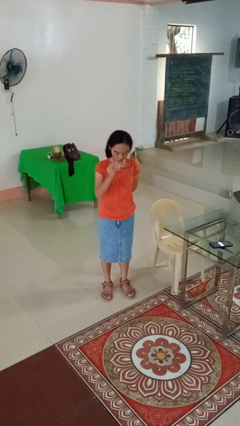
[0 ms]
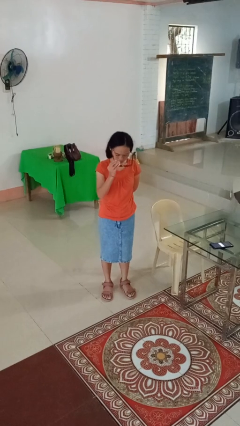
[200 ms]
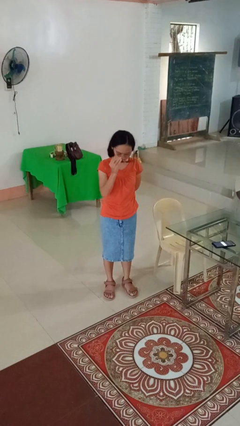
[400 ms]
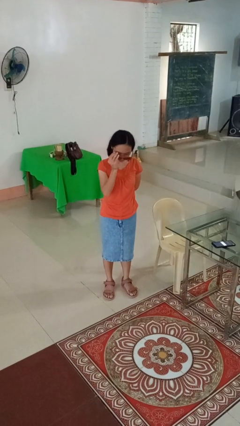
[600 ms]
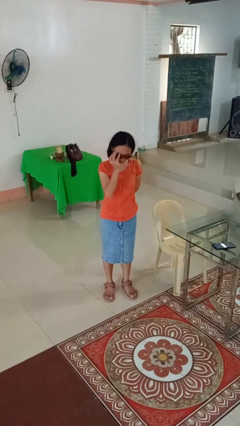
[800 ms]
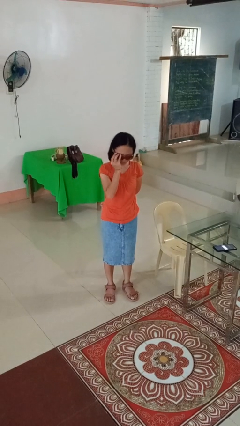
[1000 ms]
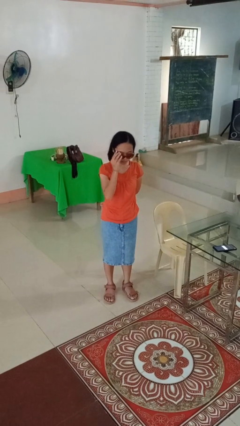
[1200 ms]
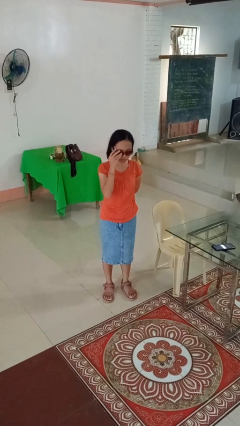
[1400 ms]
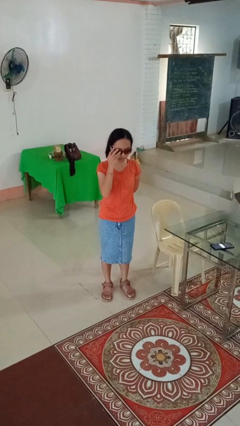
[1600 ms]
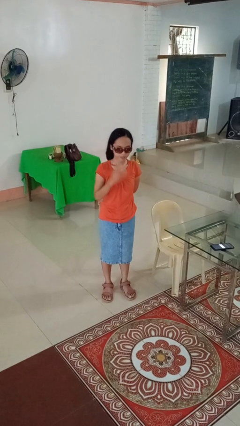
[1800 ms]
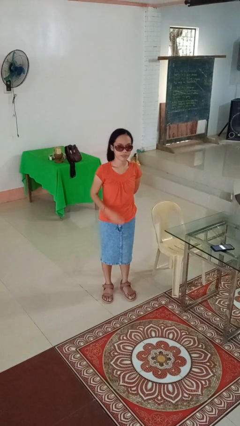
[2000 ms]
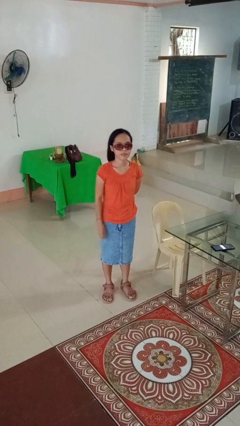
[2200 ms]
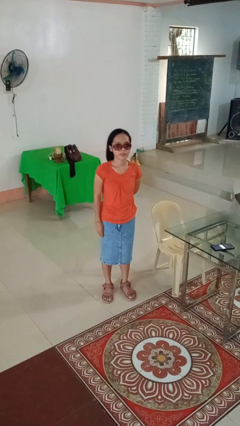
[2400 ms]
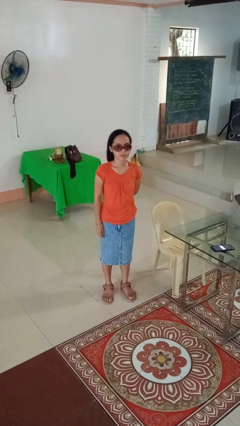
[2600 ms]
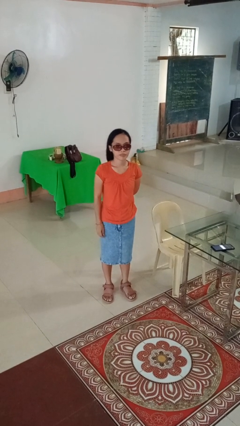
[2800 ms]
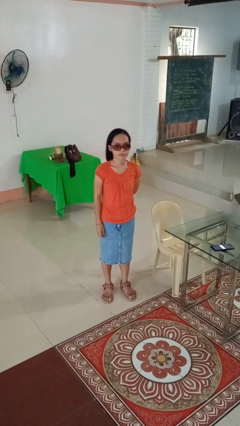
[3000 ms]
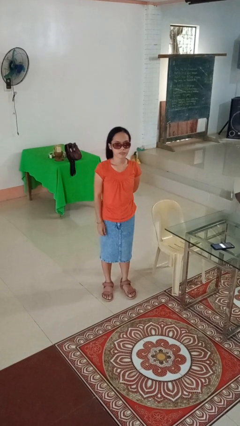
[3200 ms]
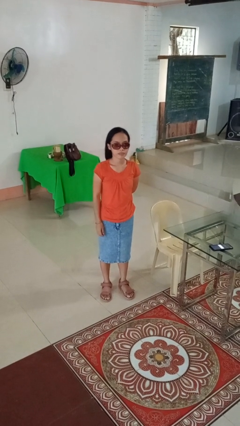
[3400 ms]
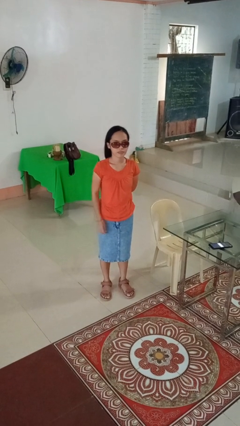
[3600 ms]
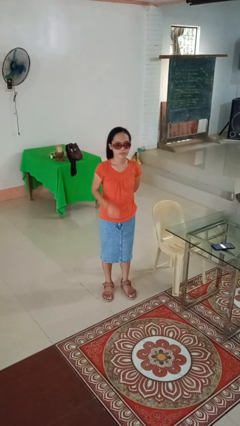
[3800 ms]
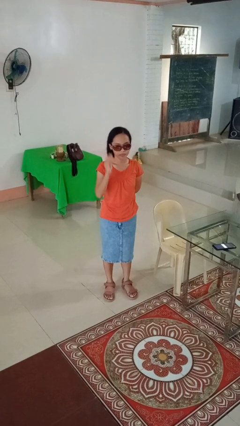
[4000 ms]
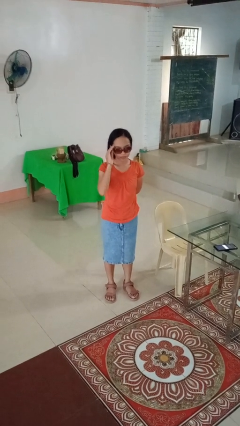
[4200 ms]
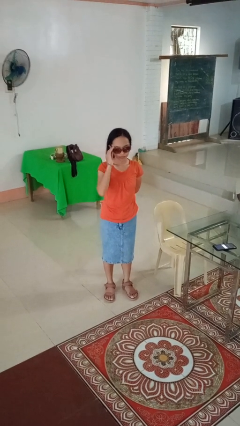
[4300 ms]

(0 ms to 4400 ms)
person puts on sunglasses

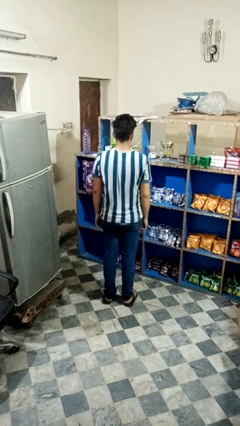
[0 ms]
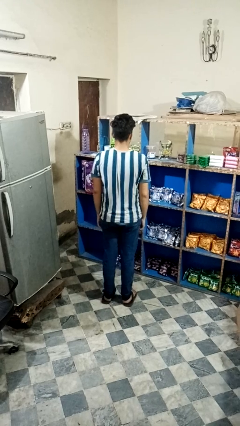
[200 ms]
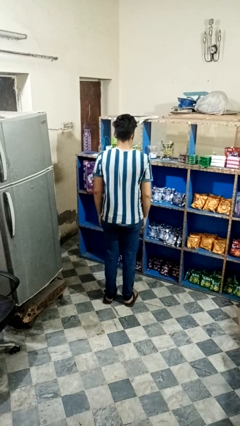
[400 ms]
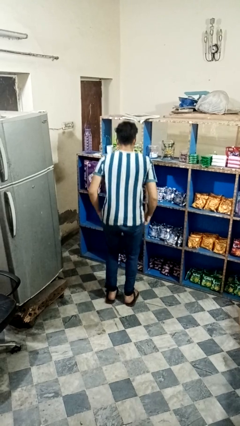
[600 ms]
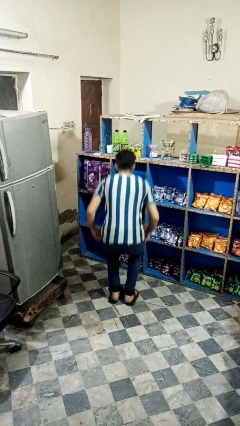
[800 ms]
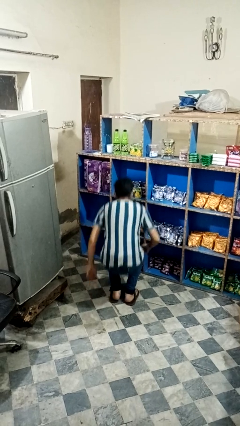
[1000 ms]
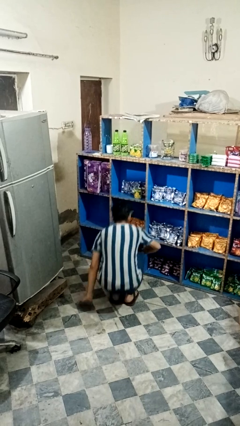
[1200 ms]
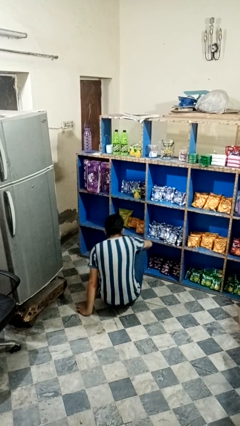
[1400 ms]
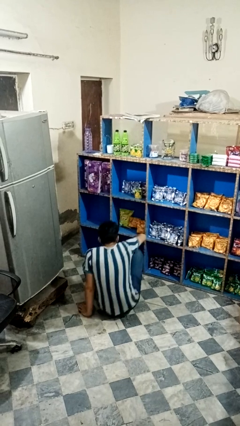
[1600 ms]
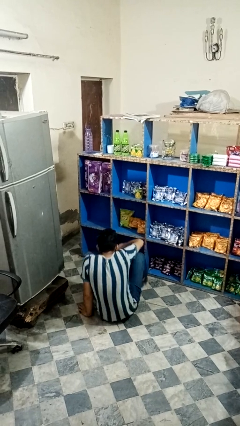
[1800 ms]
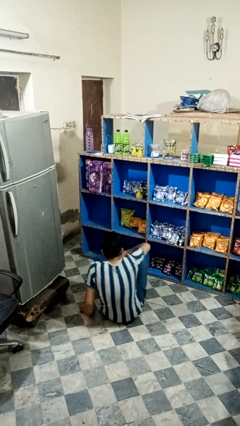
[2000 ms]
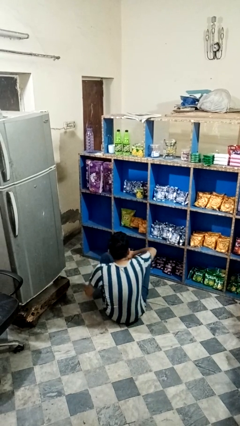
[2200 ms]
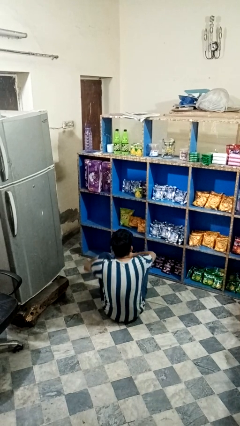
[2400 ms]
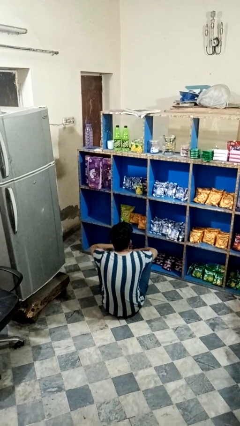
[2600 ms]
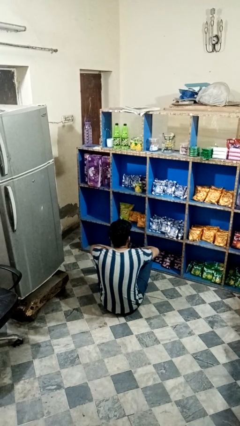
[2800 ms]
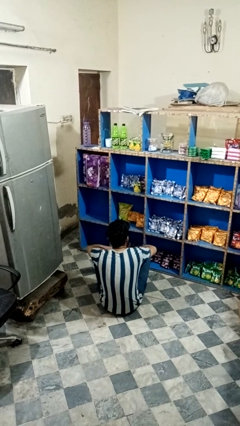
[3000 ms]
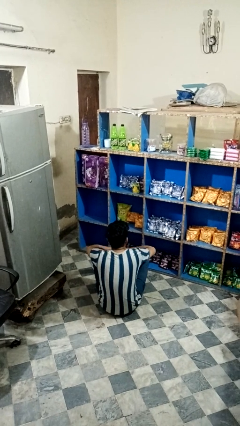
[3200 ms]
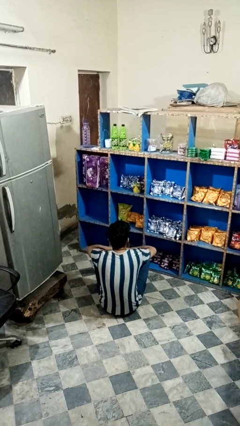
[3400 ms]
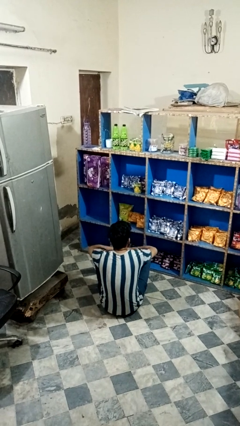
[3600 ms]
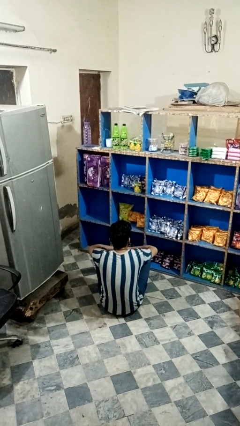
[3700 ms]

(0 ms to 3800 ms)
person sits crisscross

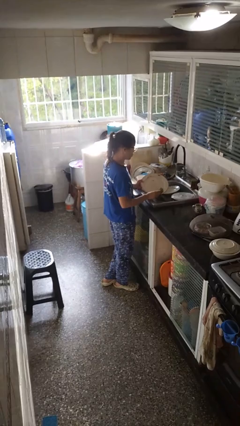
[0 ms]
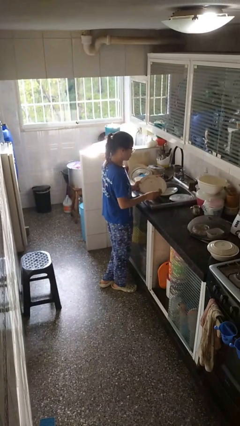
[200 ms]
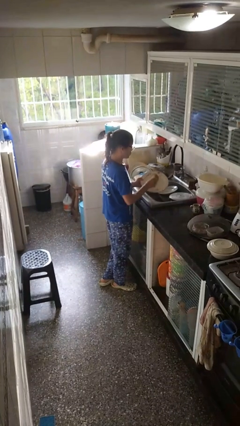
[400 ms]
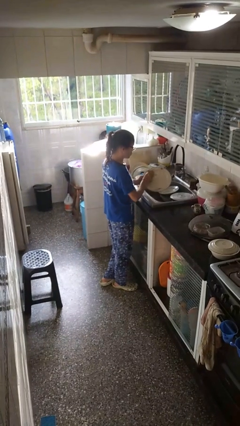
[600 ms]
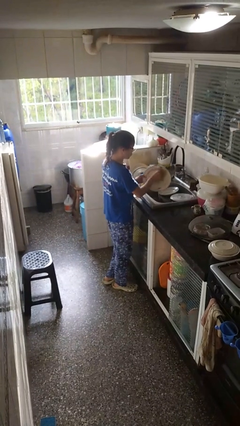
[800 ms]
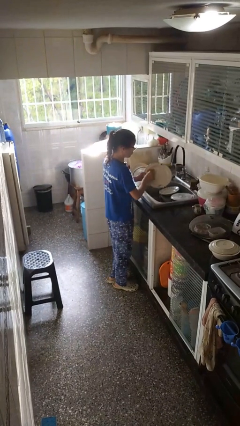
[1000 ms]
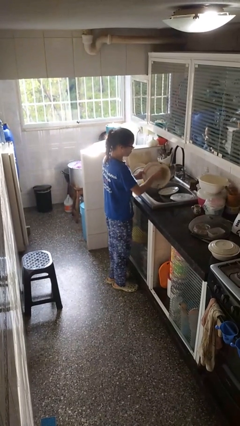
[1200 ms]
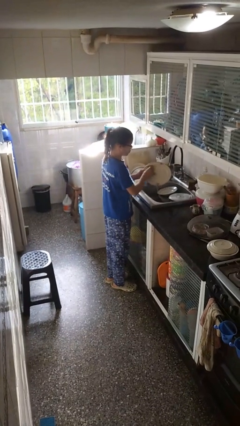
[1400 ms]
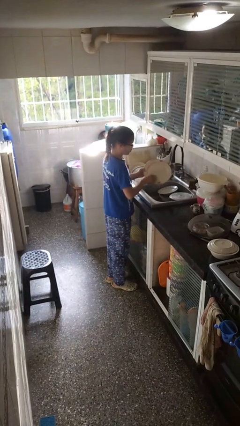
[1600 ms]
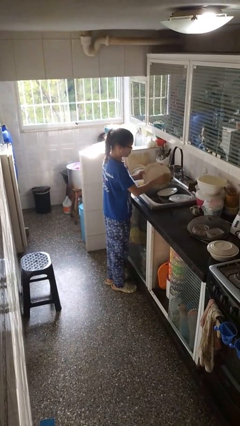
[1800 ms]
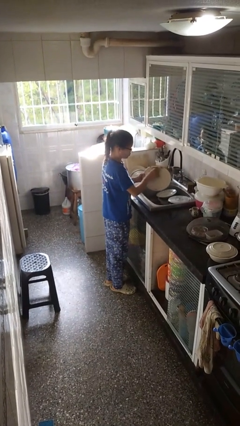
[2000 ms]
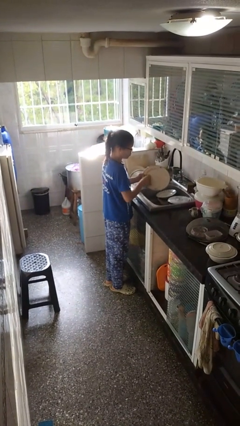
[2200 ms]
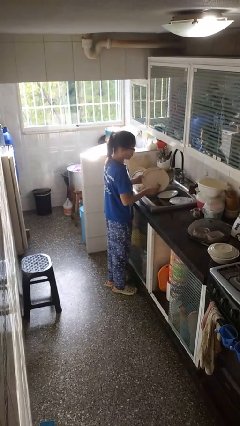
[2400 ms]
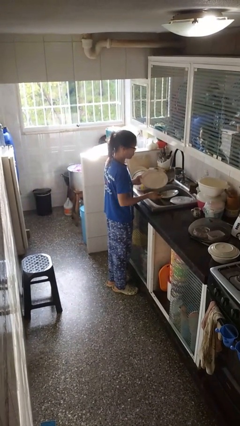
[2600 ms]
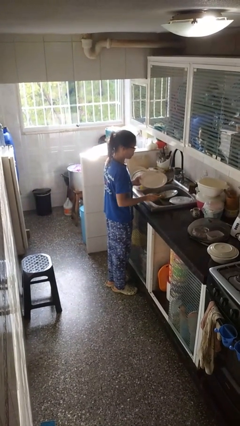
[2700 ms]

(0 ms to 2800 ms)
person washes dish

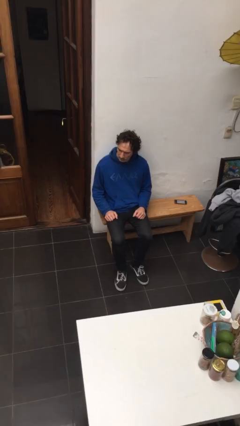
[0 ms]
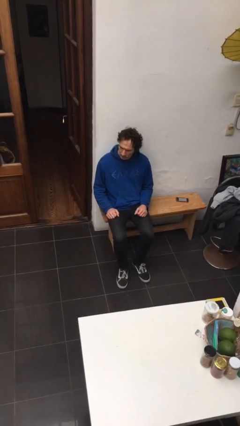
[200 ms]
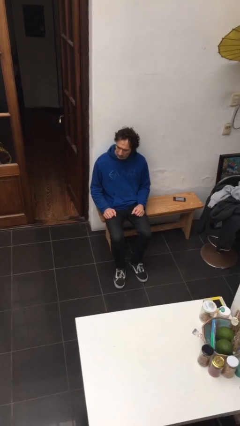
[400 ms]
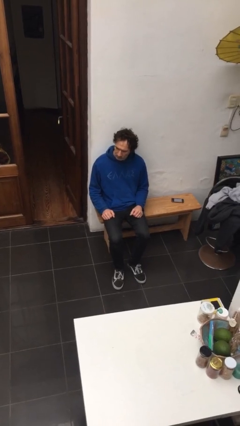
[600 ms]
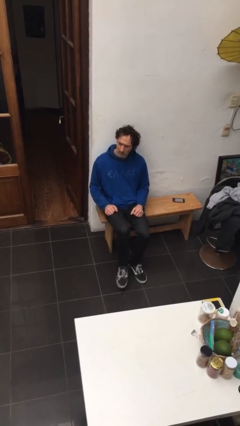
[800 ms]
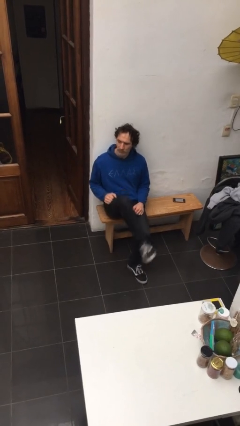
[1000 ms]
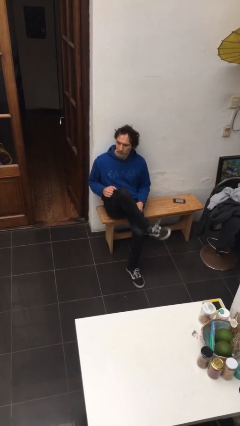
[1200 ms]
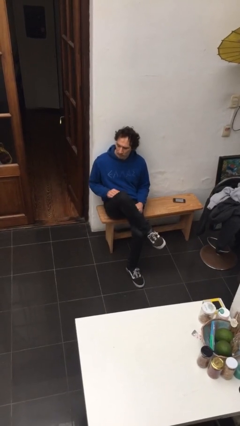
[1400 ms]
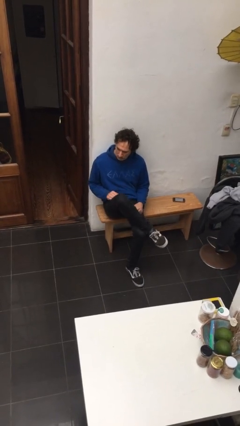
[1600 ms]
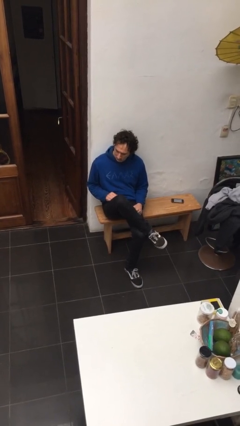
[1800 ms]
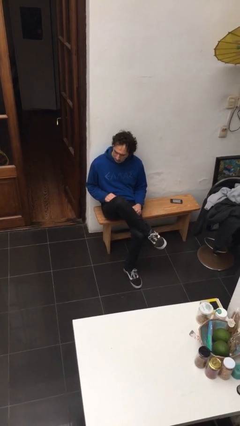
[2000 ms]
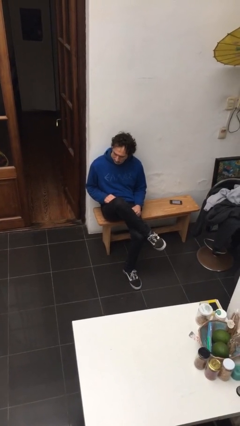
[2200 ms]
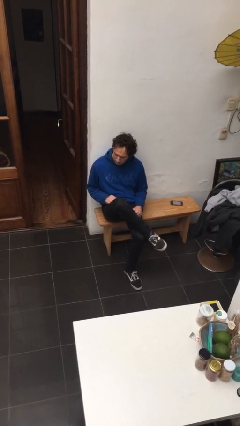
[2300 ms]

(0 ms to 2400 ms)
person crosses legs

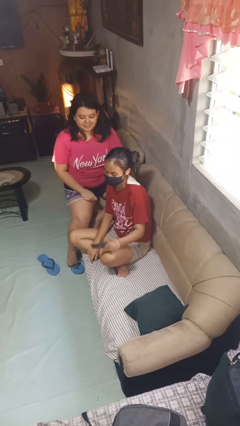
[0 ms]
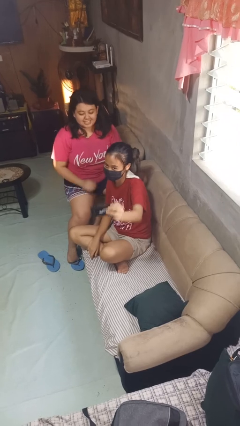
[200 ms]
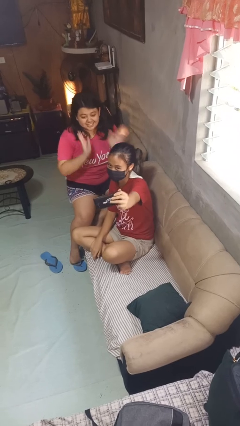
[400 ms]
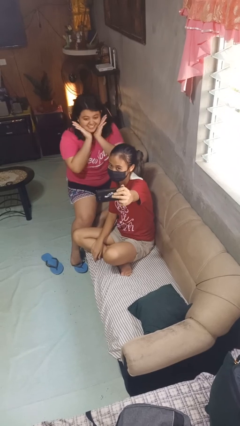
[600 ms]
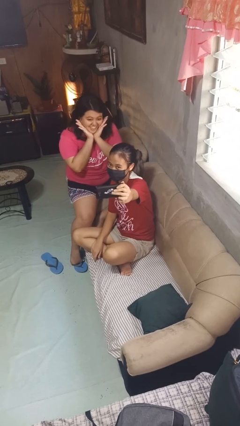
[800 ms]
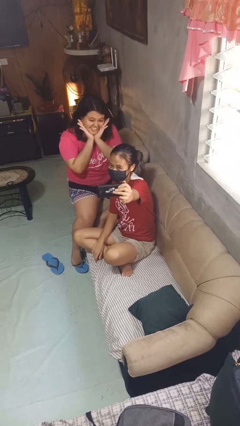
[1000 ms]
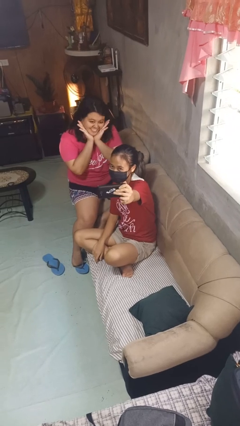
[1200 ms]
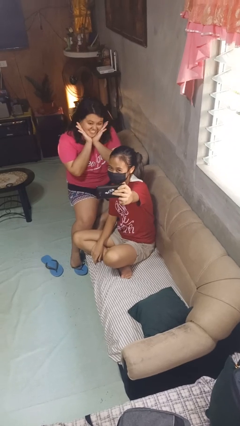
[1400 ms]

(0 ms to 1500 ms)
person takes selfie with person

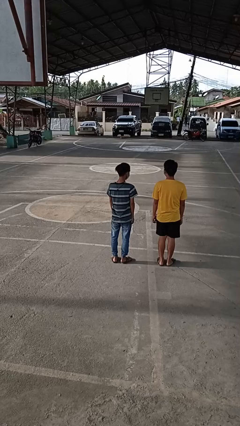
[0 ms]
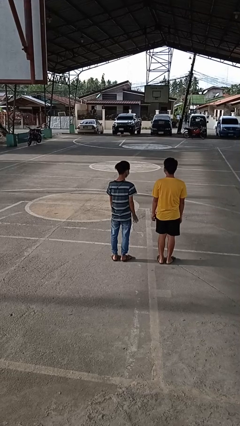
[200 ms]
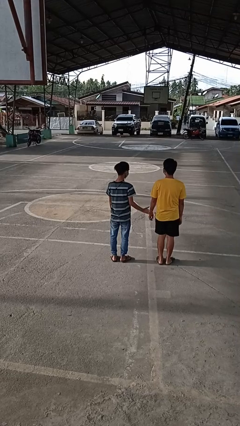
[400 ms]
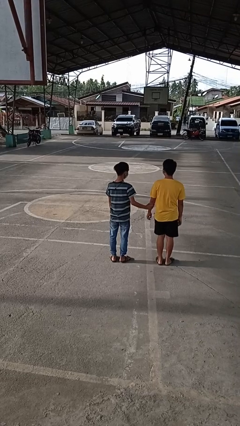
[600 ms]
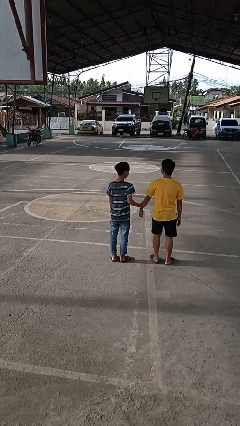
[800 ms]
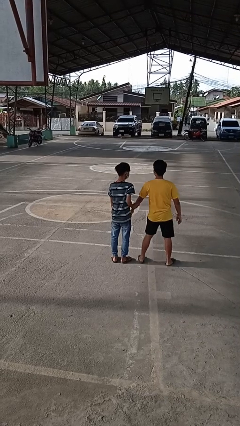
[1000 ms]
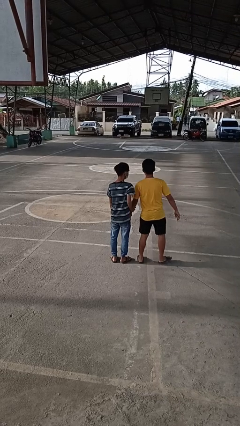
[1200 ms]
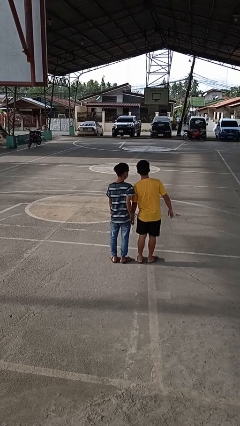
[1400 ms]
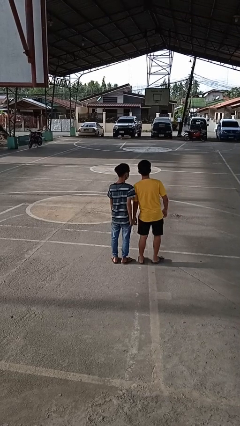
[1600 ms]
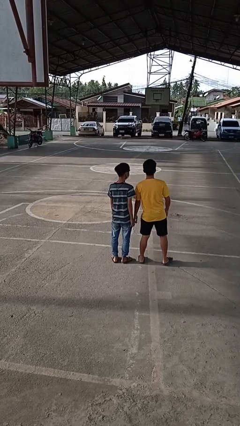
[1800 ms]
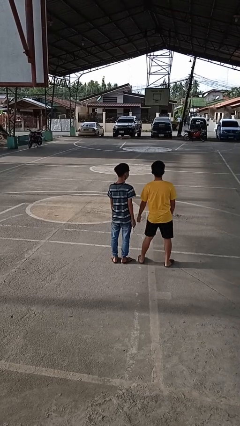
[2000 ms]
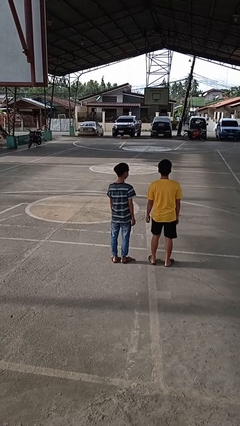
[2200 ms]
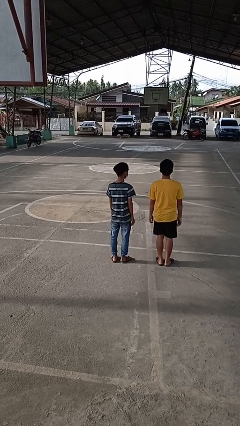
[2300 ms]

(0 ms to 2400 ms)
person grabs person by forearm
